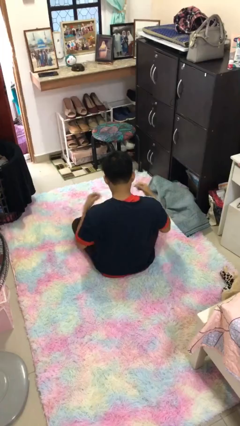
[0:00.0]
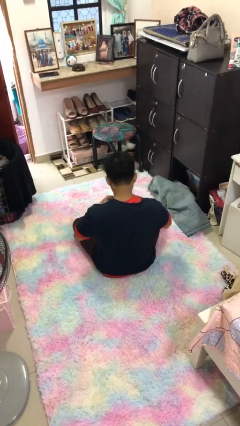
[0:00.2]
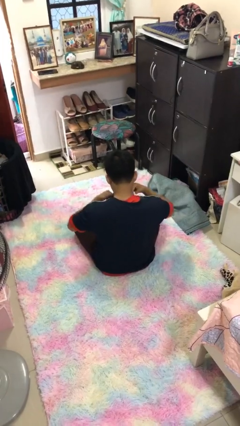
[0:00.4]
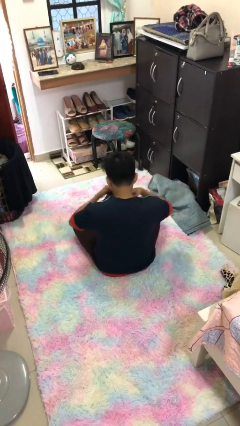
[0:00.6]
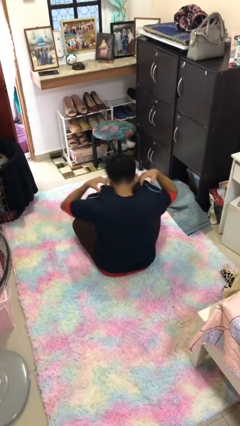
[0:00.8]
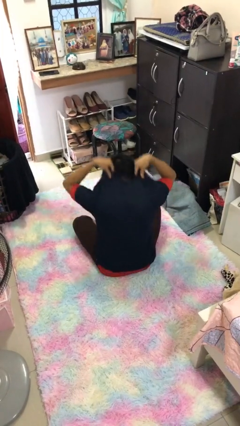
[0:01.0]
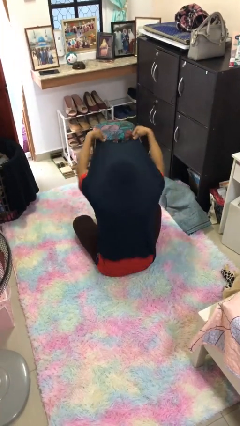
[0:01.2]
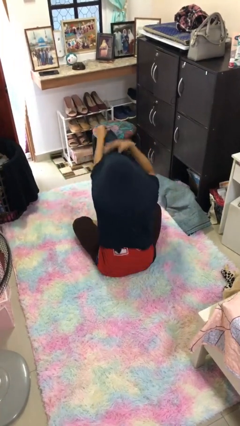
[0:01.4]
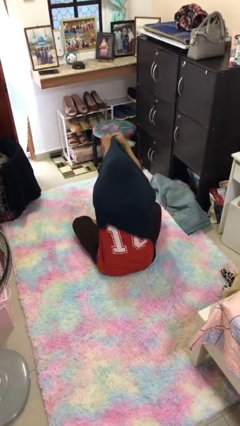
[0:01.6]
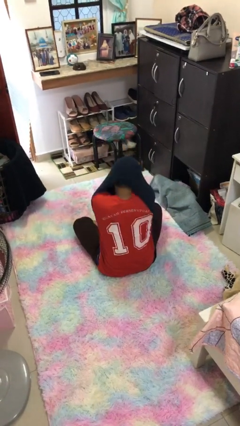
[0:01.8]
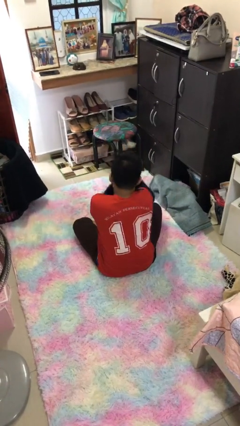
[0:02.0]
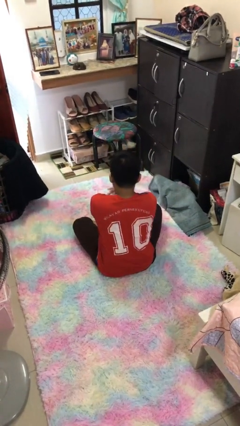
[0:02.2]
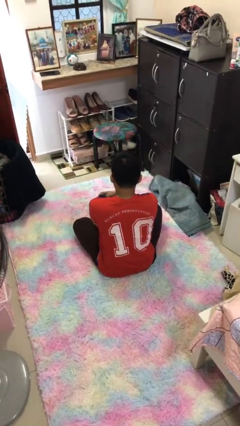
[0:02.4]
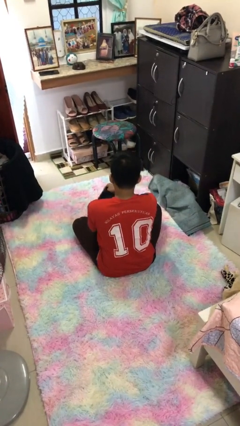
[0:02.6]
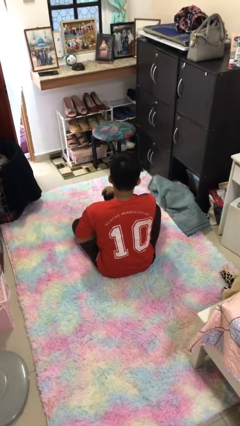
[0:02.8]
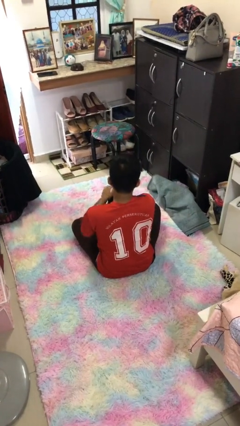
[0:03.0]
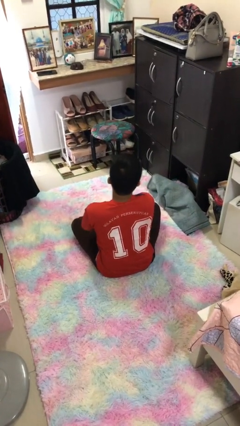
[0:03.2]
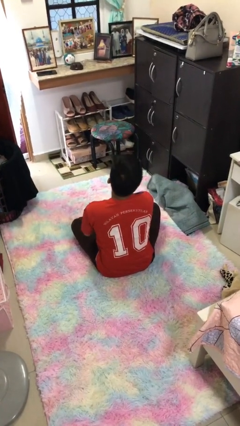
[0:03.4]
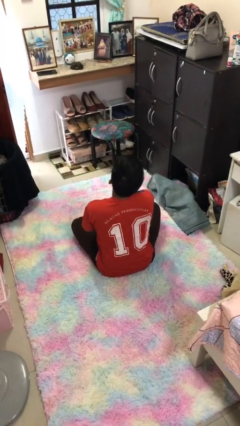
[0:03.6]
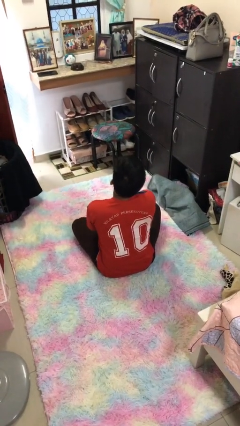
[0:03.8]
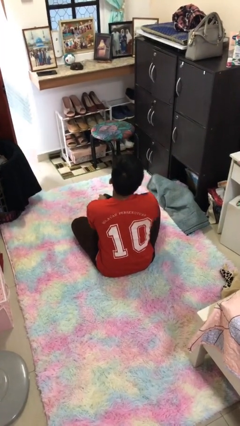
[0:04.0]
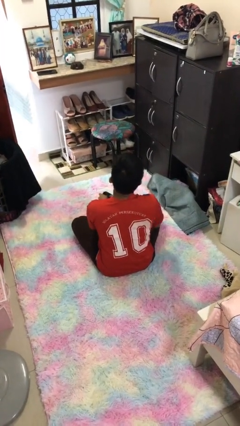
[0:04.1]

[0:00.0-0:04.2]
person takes off shirt

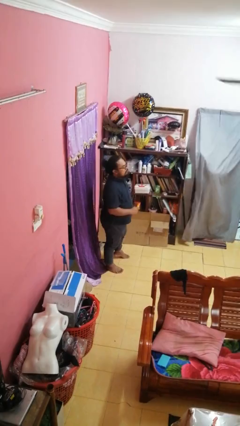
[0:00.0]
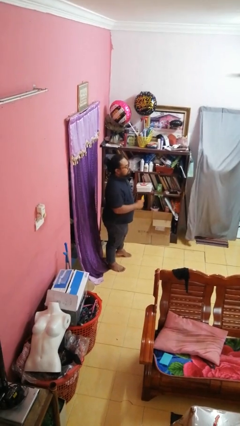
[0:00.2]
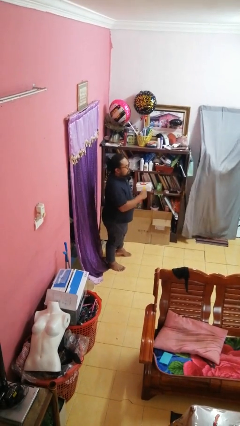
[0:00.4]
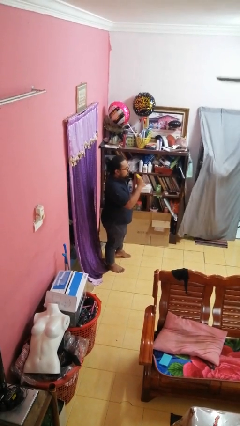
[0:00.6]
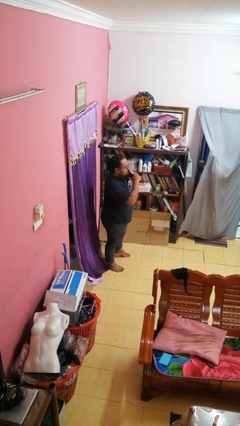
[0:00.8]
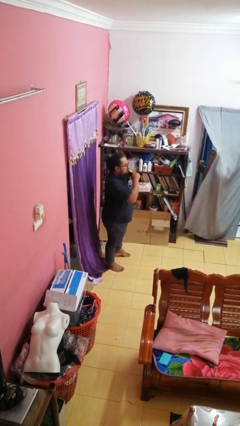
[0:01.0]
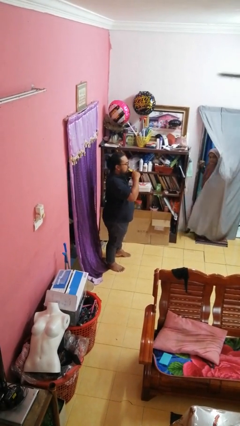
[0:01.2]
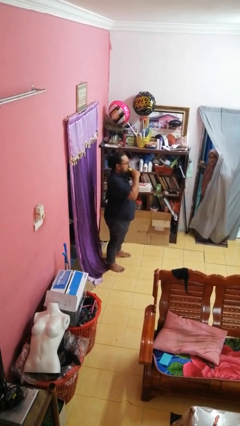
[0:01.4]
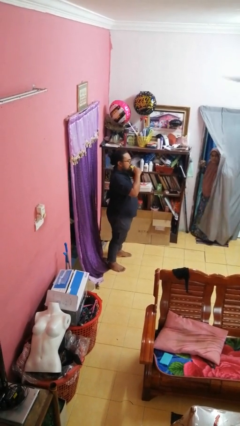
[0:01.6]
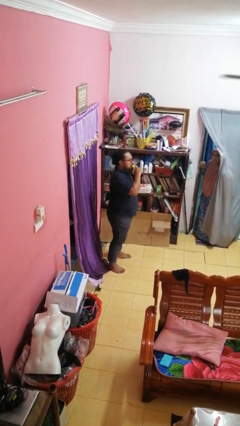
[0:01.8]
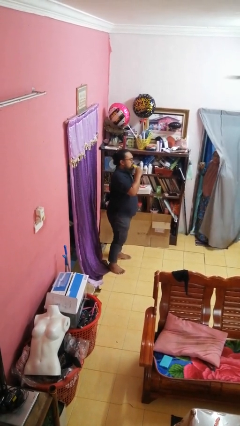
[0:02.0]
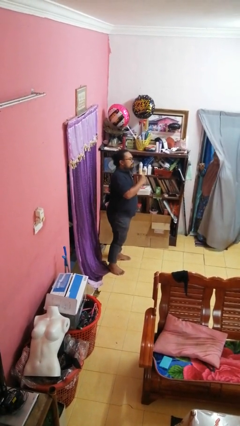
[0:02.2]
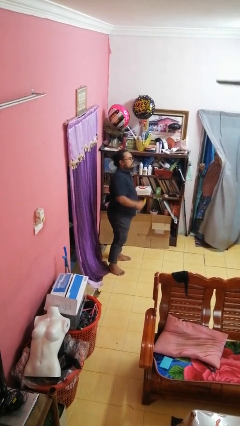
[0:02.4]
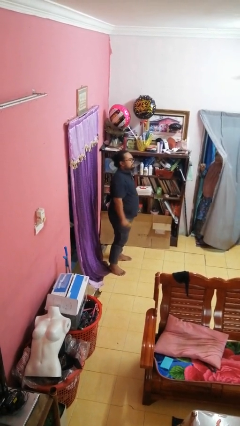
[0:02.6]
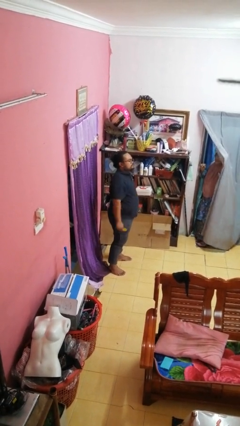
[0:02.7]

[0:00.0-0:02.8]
person eats banana

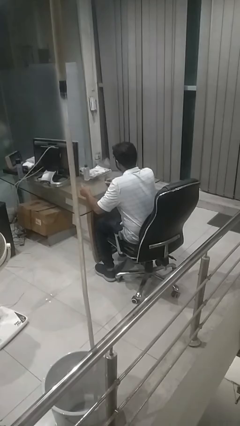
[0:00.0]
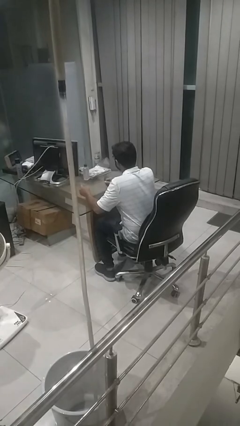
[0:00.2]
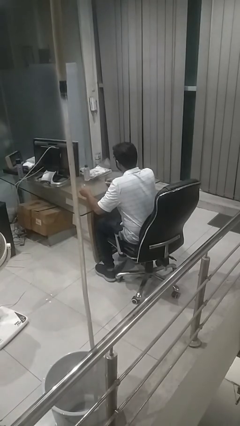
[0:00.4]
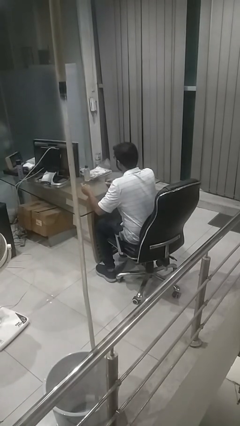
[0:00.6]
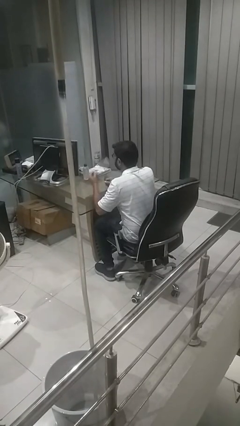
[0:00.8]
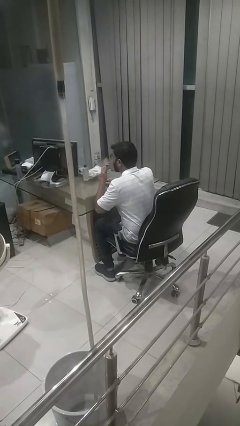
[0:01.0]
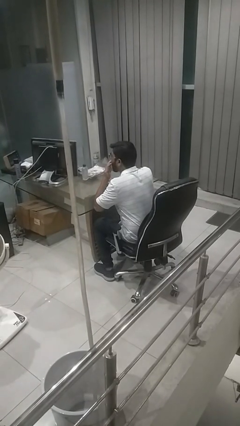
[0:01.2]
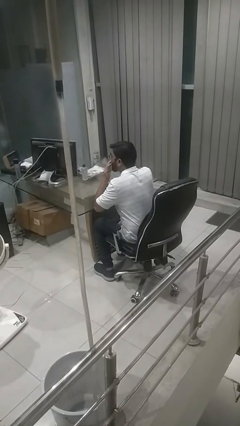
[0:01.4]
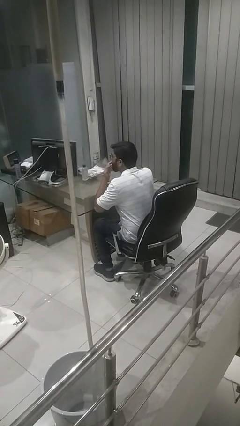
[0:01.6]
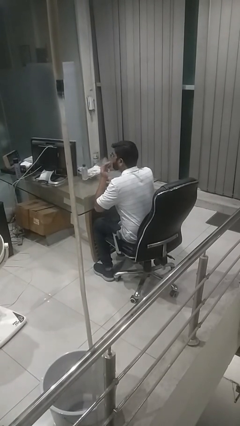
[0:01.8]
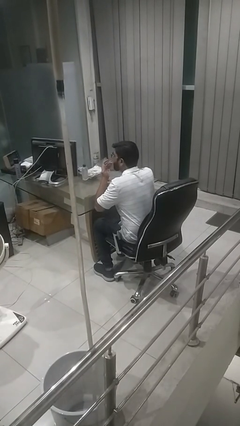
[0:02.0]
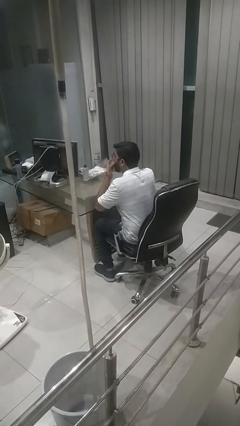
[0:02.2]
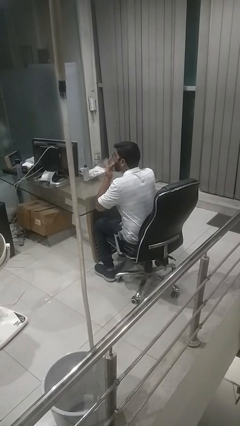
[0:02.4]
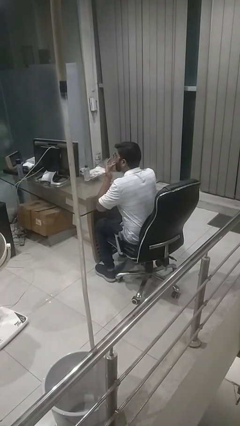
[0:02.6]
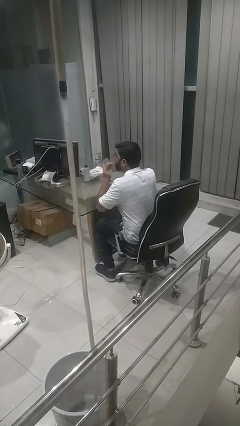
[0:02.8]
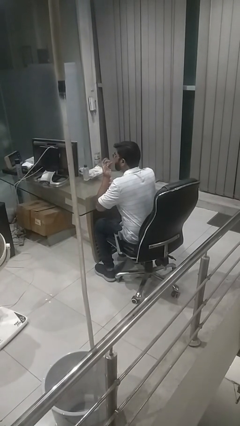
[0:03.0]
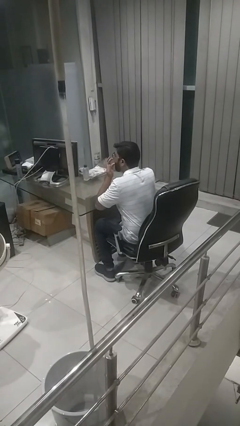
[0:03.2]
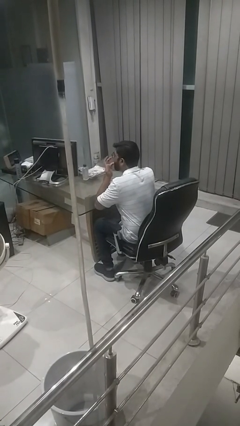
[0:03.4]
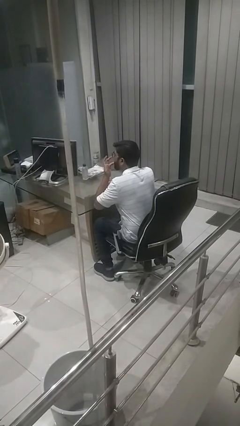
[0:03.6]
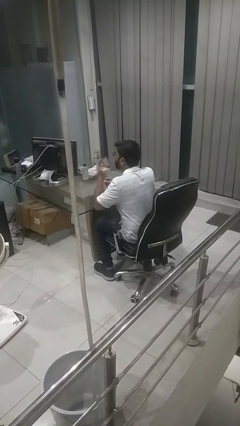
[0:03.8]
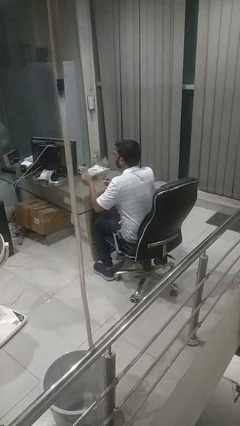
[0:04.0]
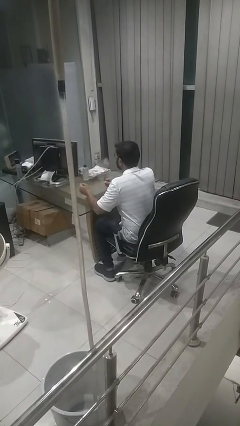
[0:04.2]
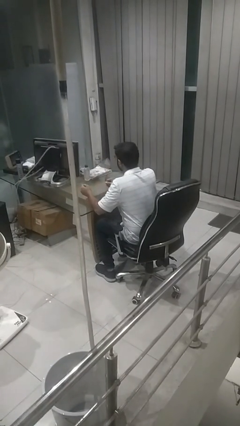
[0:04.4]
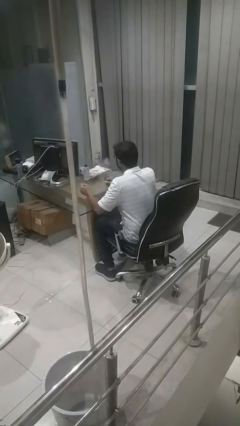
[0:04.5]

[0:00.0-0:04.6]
person licks fingers

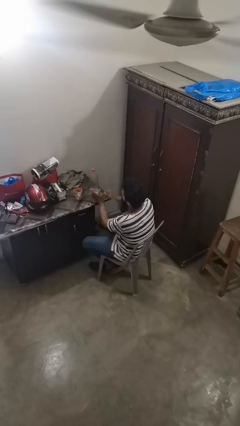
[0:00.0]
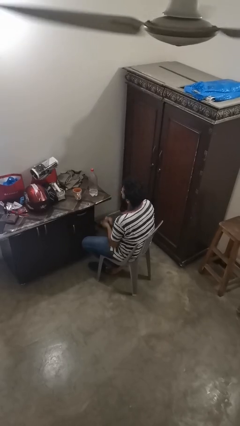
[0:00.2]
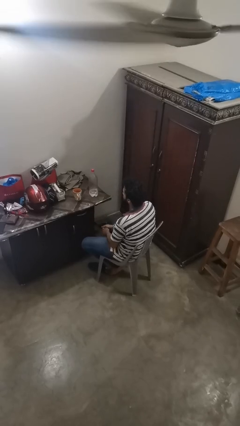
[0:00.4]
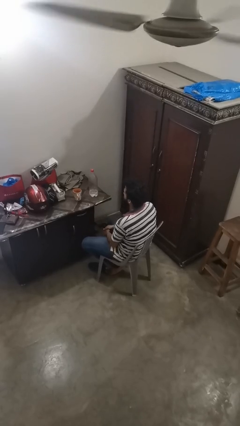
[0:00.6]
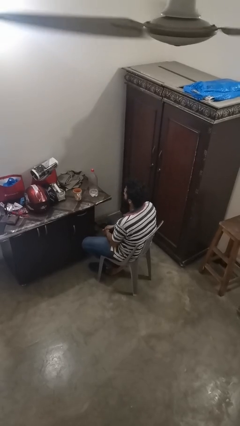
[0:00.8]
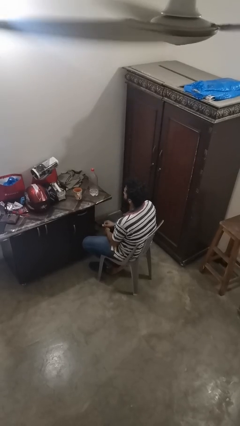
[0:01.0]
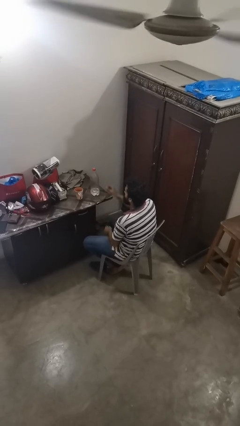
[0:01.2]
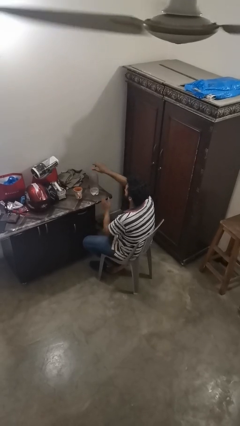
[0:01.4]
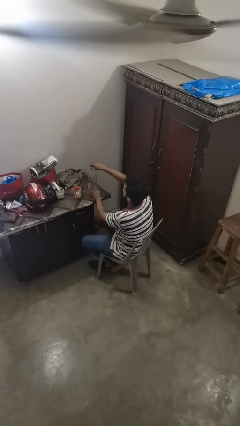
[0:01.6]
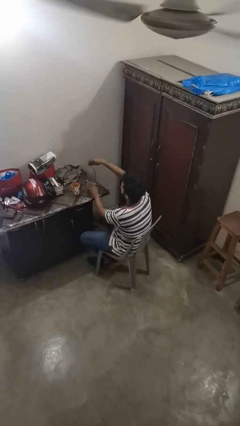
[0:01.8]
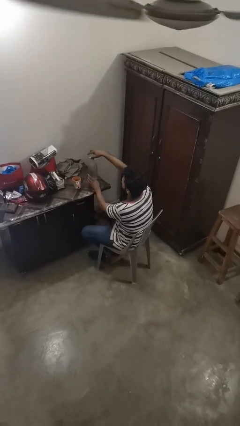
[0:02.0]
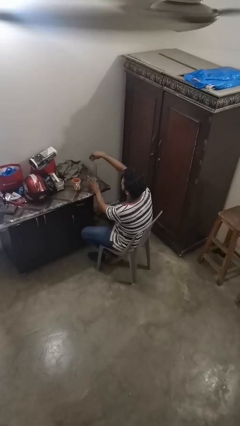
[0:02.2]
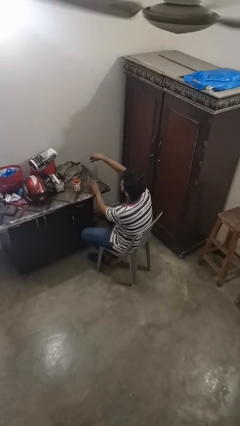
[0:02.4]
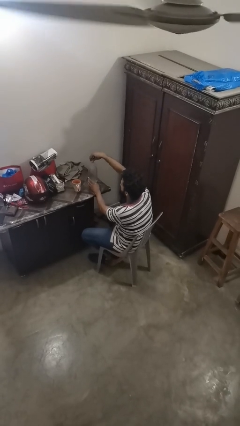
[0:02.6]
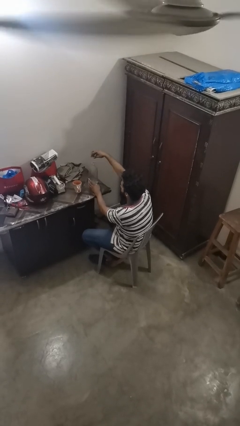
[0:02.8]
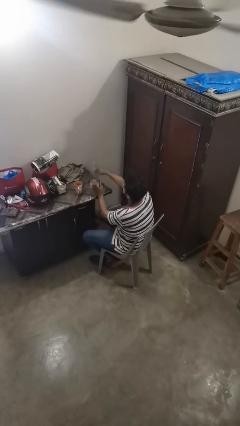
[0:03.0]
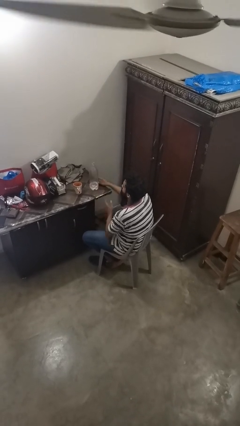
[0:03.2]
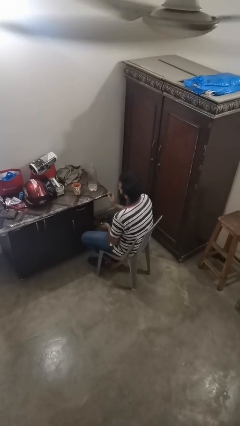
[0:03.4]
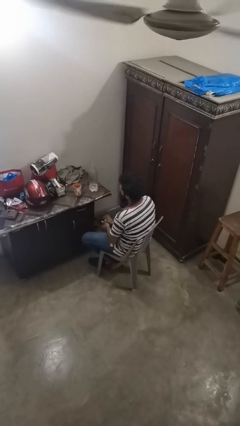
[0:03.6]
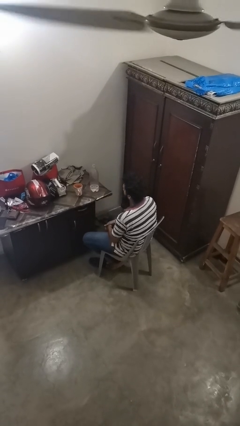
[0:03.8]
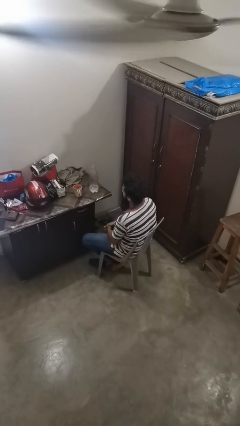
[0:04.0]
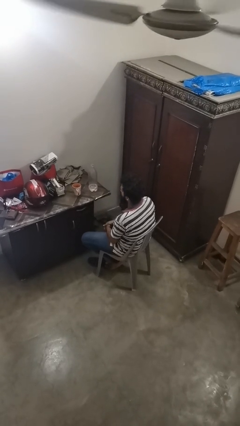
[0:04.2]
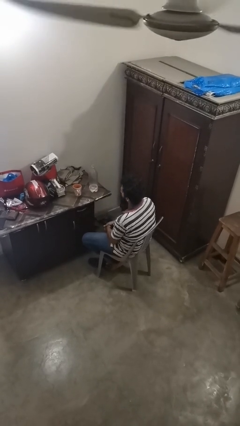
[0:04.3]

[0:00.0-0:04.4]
person unscrews lid from bottle

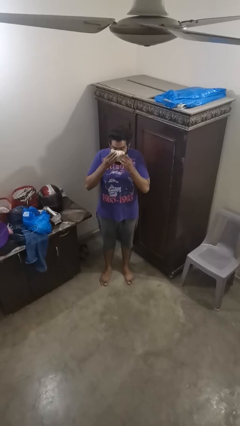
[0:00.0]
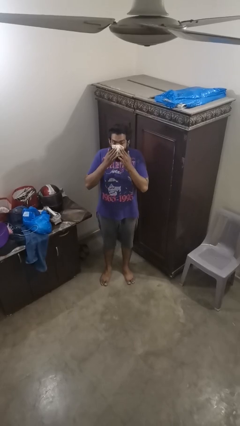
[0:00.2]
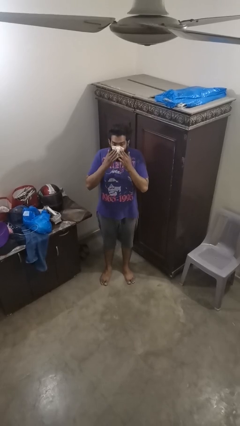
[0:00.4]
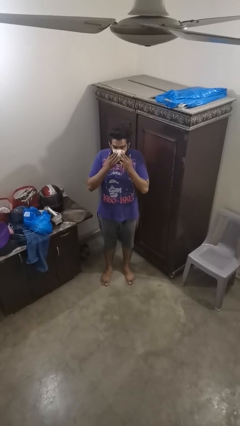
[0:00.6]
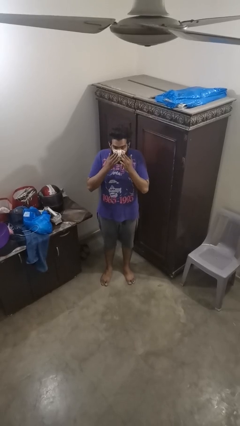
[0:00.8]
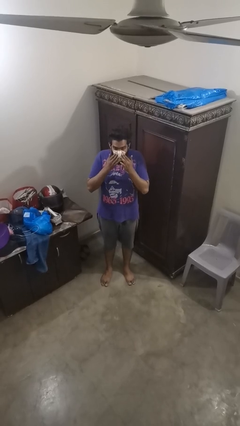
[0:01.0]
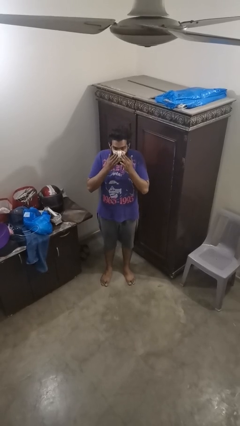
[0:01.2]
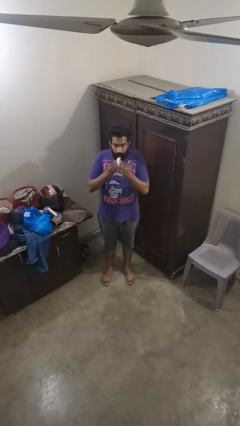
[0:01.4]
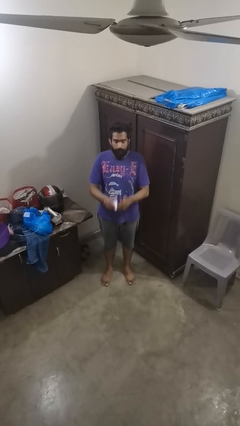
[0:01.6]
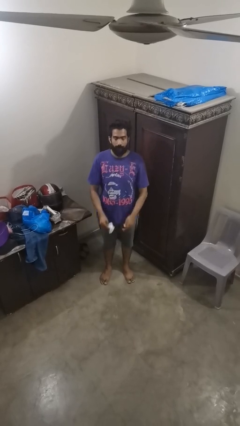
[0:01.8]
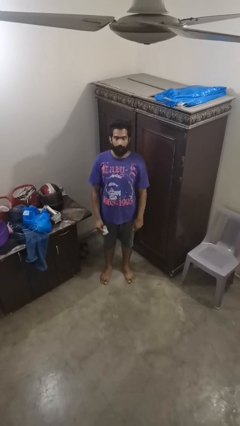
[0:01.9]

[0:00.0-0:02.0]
person blows nose
